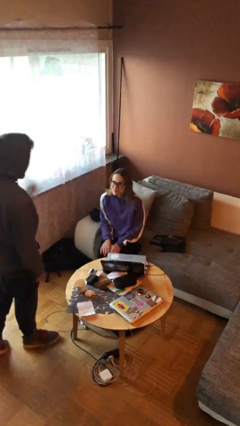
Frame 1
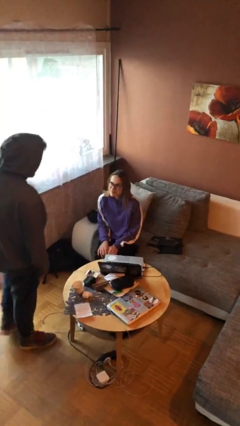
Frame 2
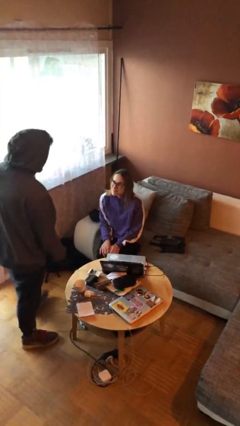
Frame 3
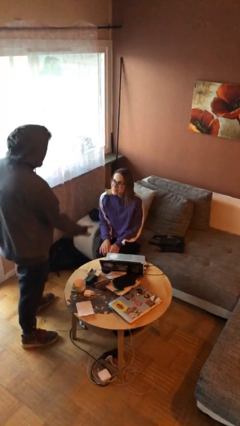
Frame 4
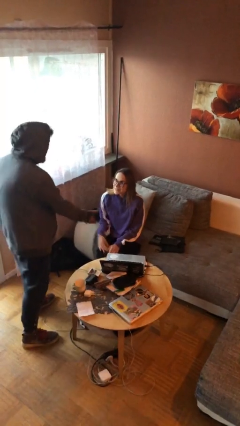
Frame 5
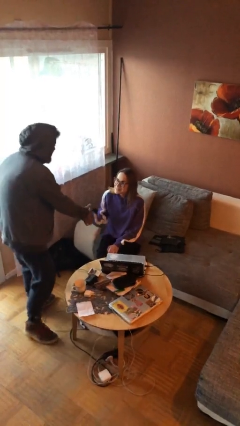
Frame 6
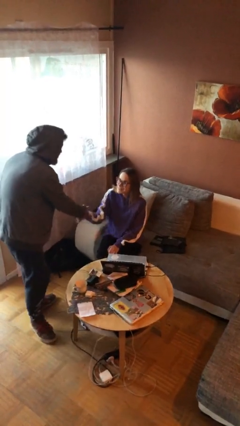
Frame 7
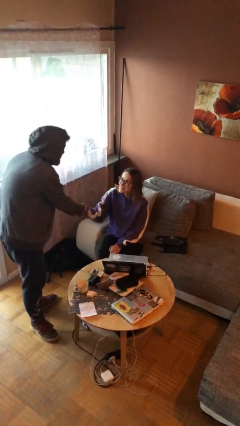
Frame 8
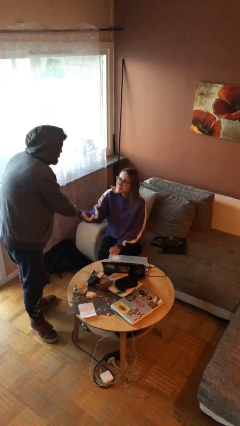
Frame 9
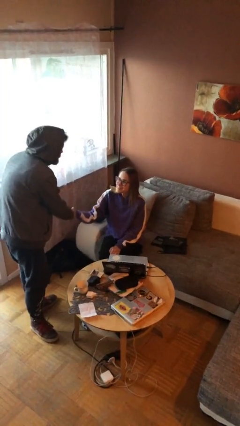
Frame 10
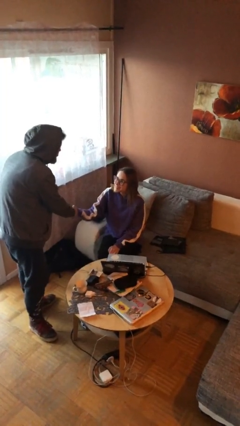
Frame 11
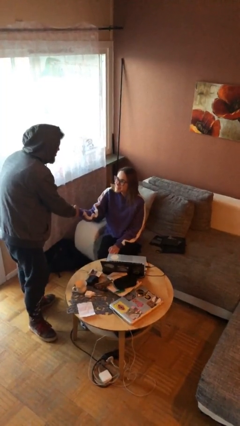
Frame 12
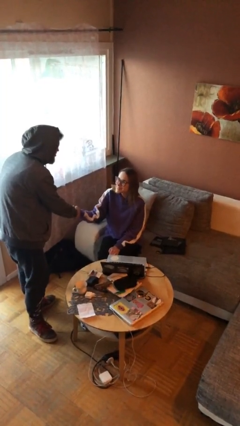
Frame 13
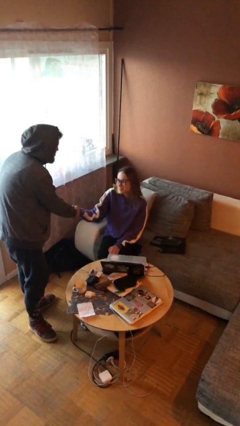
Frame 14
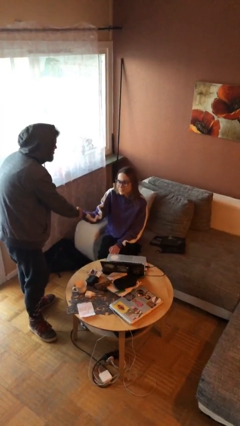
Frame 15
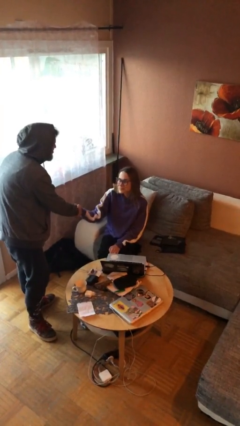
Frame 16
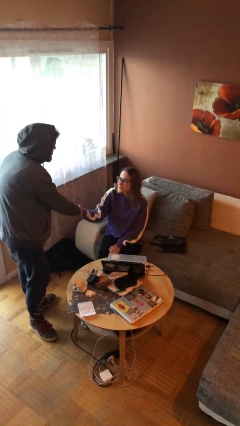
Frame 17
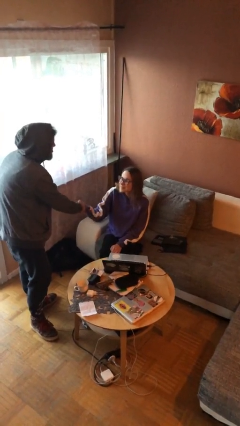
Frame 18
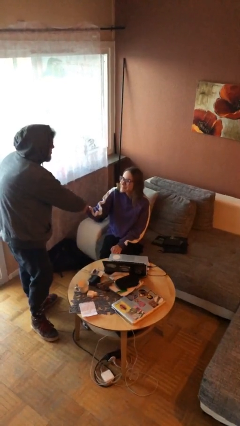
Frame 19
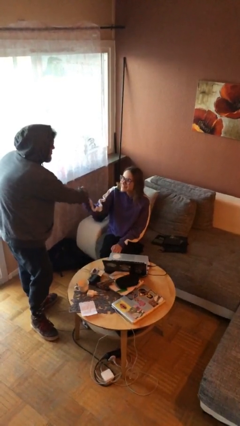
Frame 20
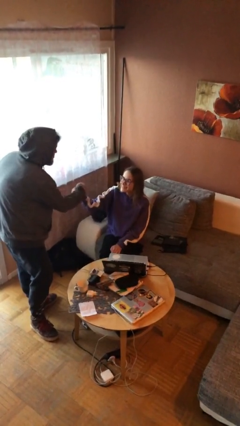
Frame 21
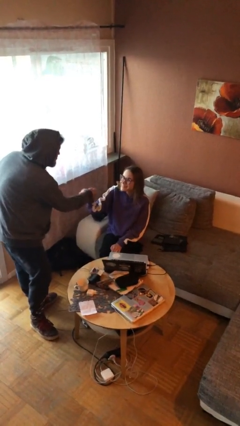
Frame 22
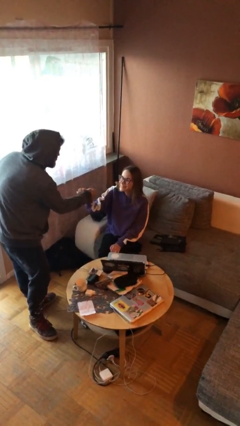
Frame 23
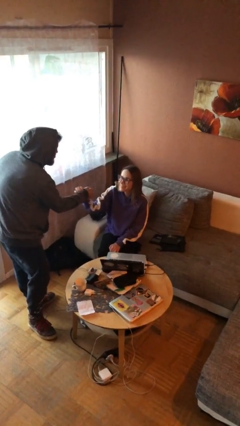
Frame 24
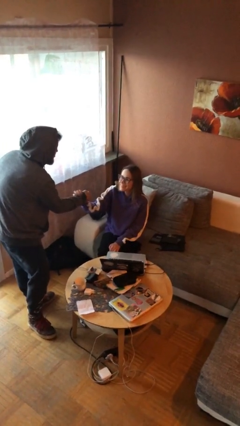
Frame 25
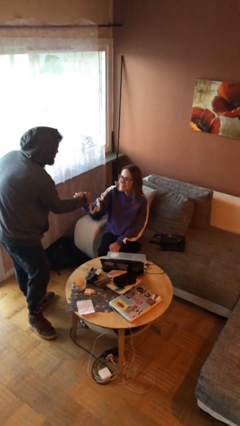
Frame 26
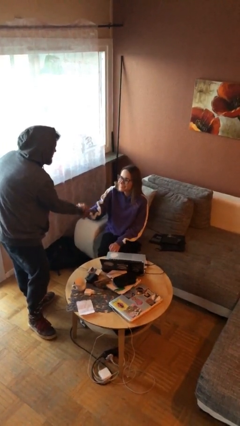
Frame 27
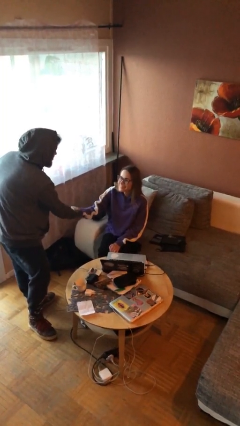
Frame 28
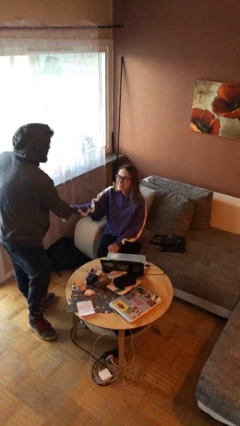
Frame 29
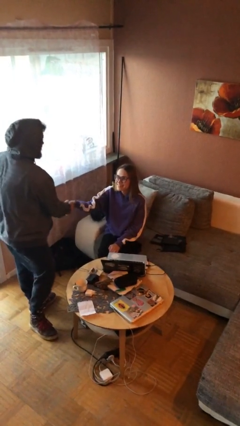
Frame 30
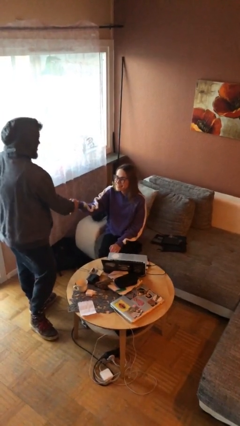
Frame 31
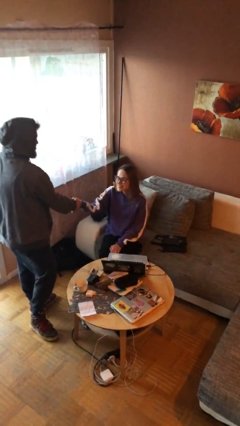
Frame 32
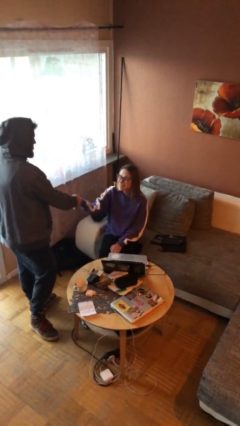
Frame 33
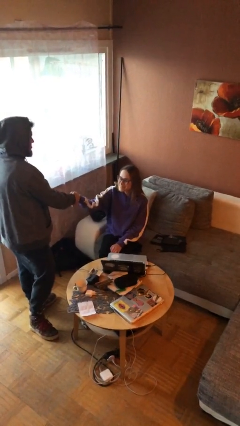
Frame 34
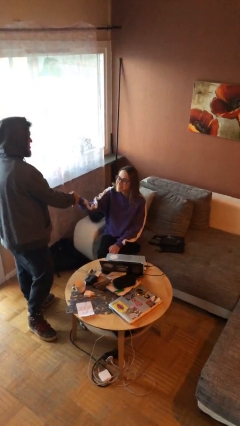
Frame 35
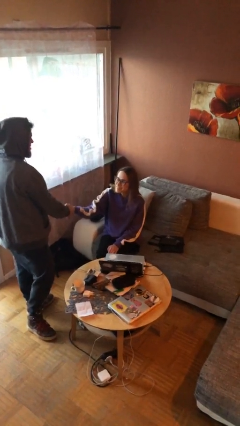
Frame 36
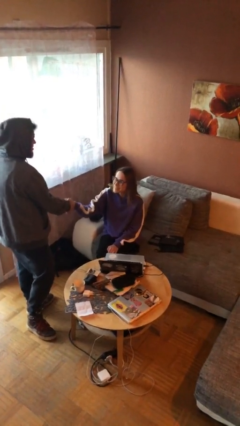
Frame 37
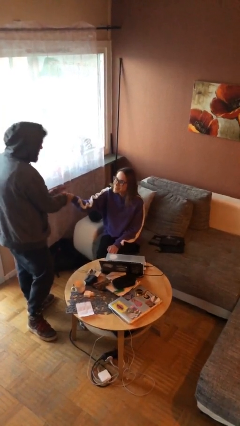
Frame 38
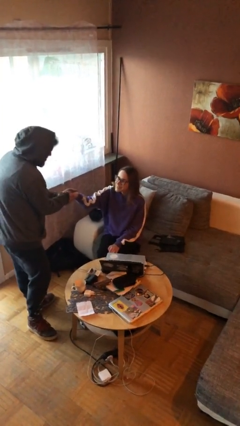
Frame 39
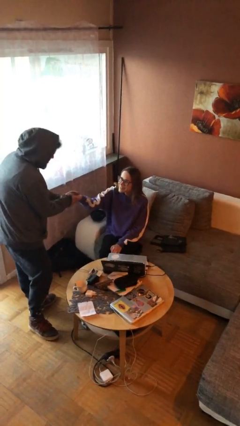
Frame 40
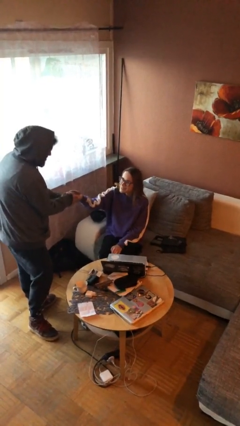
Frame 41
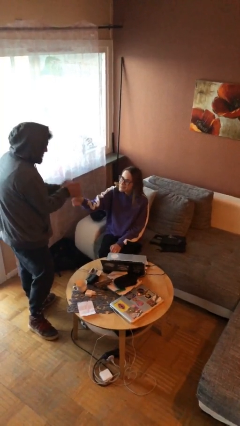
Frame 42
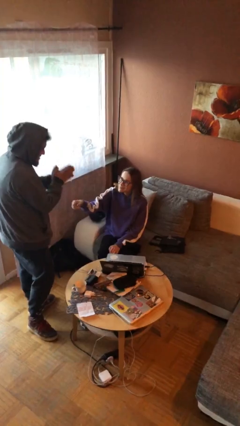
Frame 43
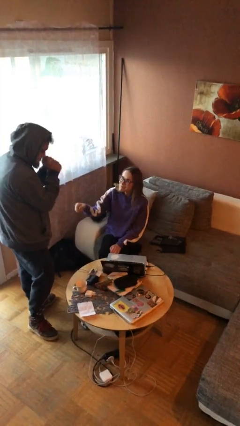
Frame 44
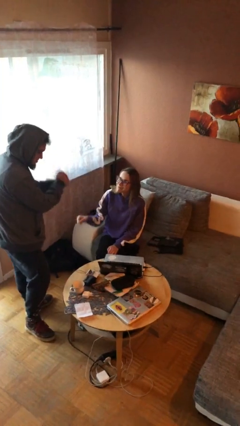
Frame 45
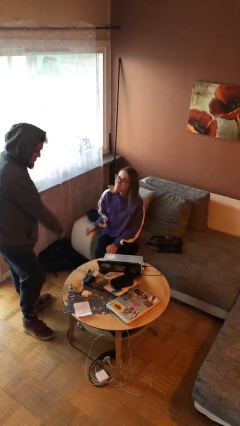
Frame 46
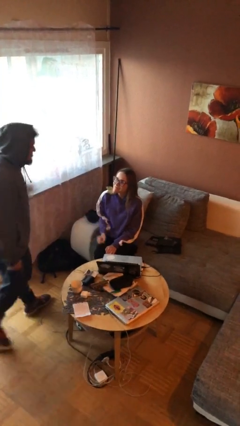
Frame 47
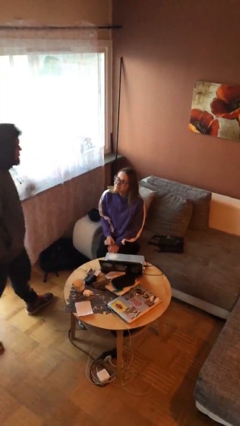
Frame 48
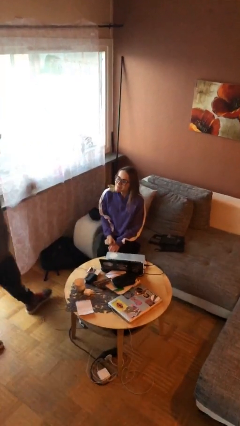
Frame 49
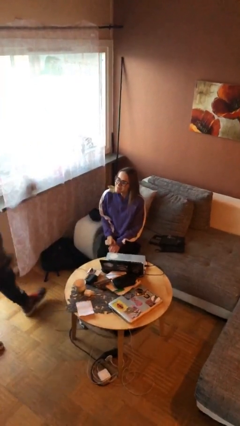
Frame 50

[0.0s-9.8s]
person shakes hand

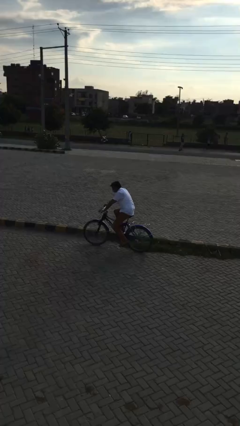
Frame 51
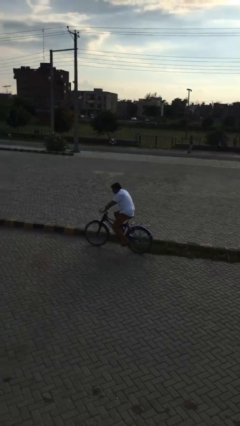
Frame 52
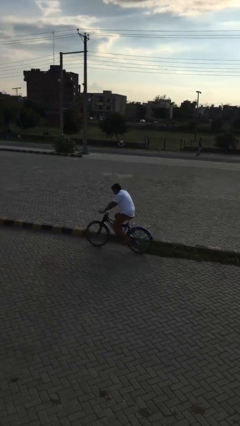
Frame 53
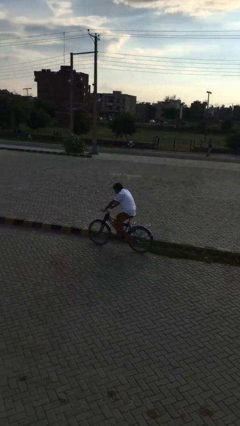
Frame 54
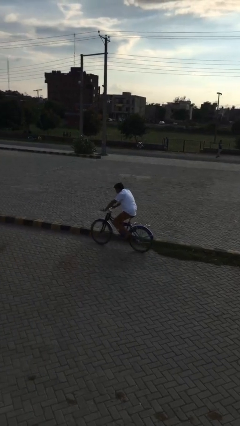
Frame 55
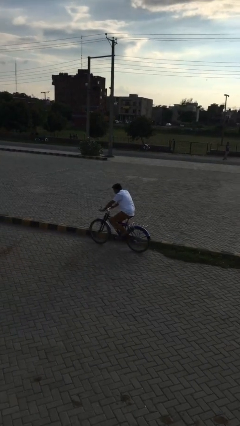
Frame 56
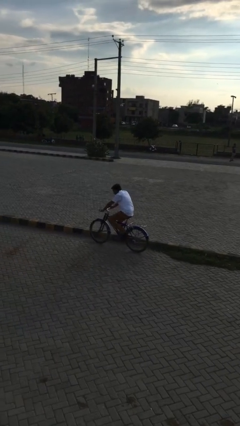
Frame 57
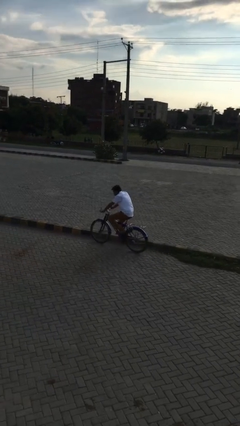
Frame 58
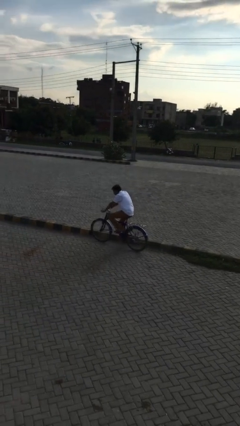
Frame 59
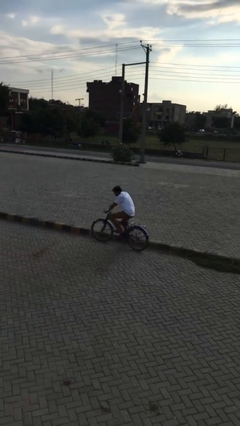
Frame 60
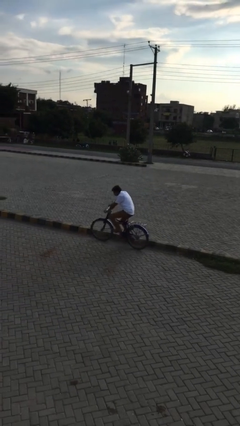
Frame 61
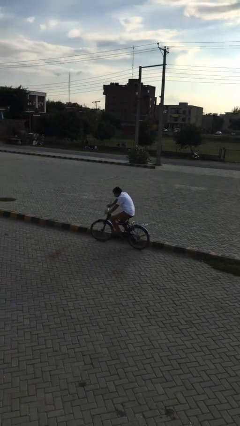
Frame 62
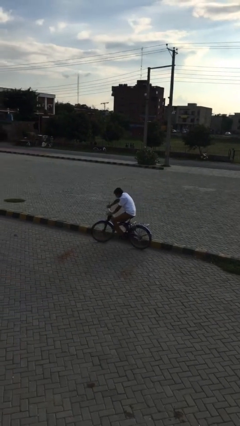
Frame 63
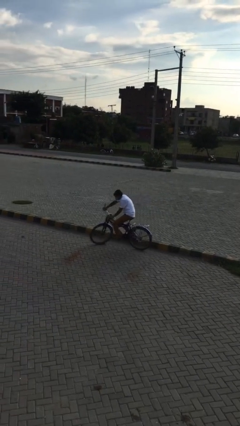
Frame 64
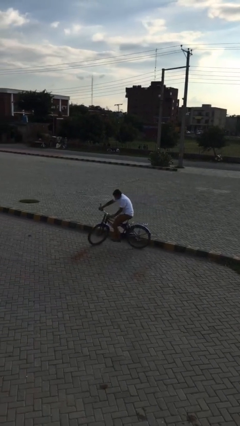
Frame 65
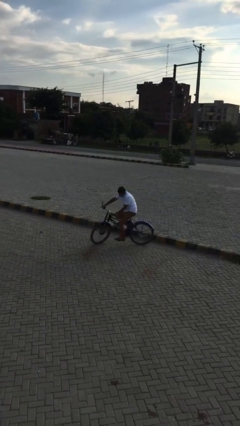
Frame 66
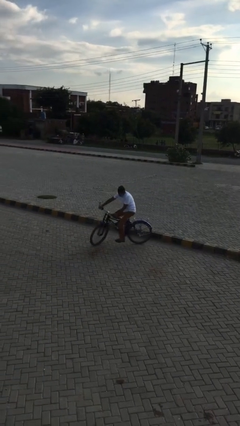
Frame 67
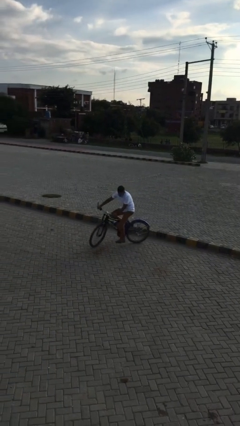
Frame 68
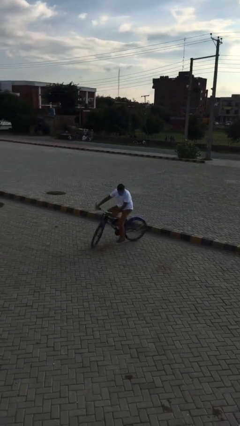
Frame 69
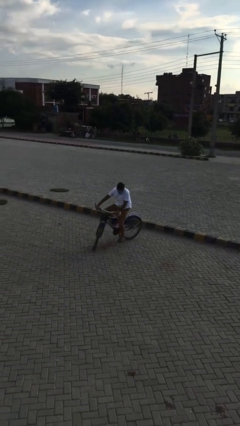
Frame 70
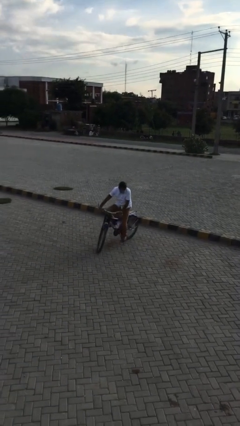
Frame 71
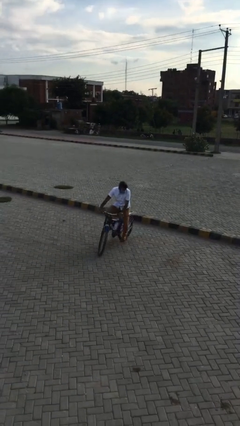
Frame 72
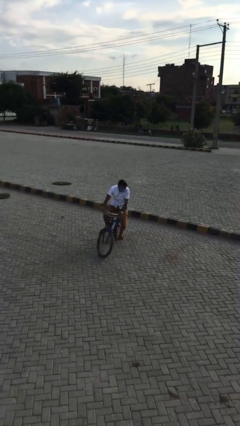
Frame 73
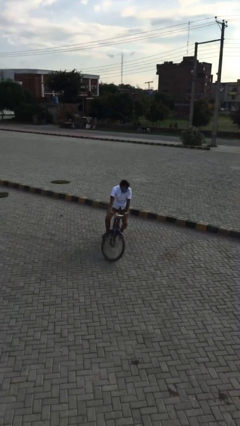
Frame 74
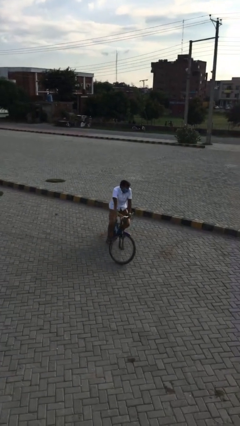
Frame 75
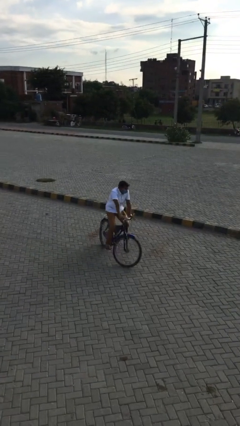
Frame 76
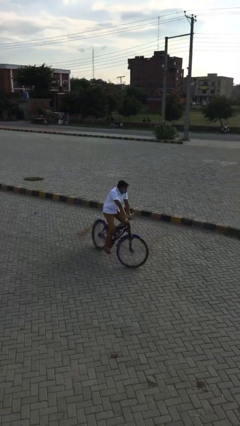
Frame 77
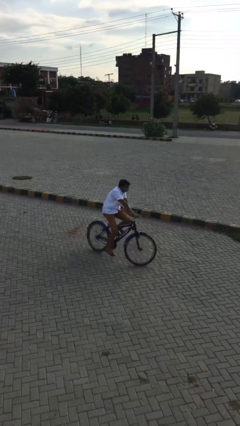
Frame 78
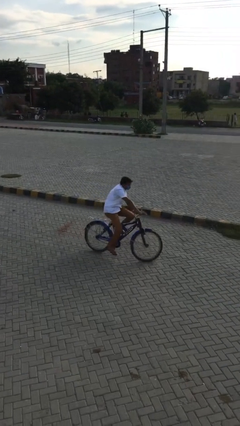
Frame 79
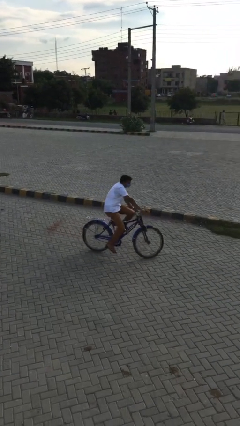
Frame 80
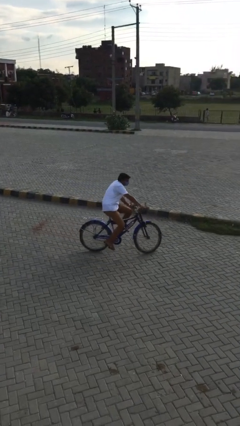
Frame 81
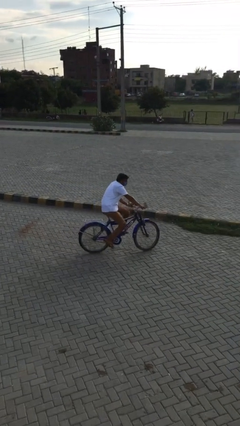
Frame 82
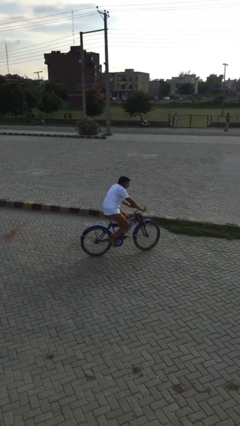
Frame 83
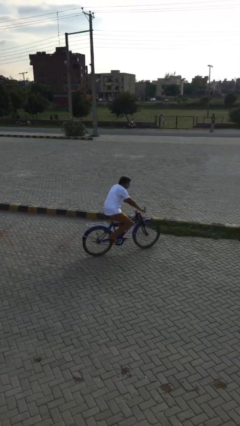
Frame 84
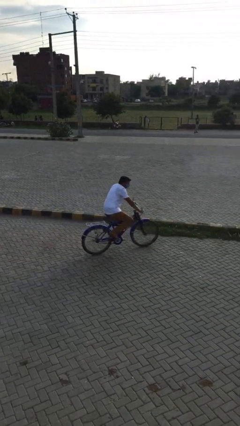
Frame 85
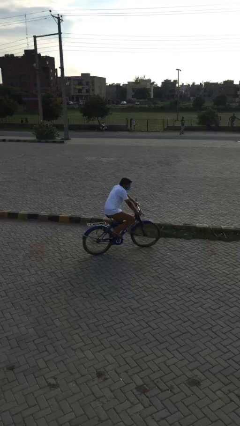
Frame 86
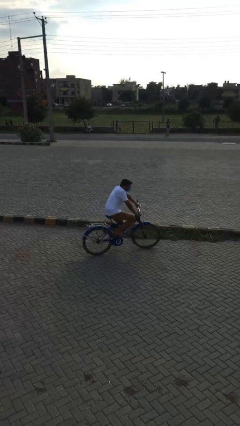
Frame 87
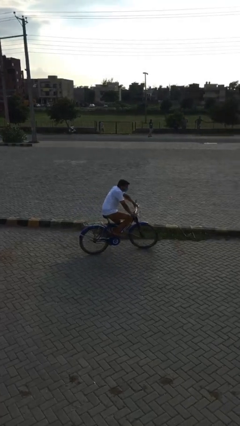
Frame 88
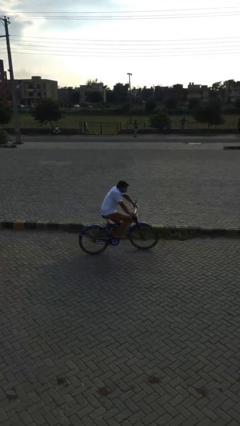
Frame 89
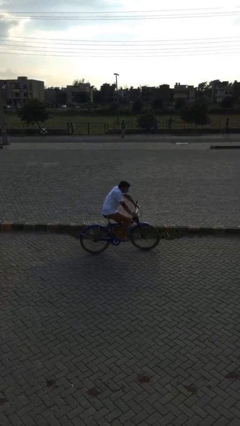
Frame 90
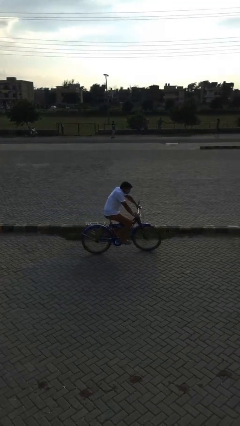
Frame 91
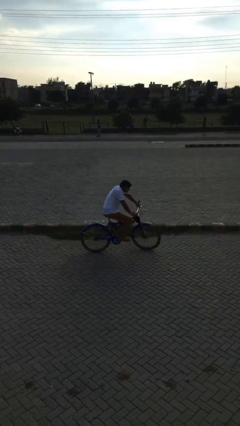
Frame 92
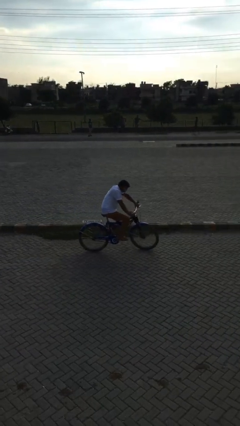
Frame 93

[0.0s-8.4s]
person rides bicycle

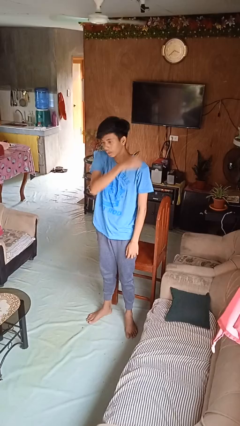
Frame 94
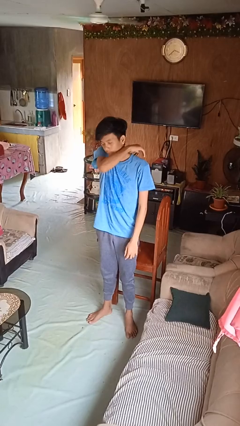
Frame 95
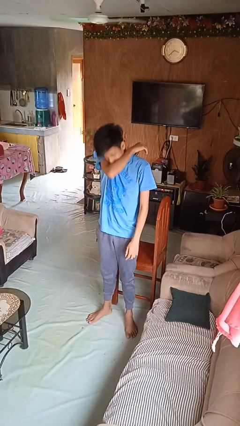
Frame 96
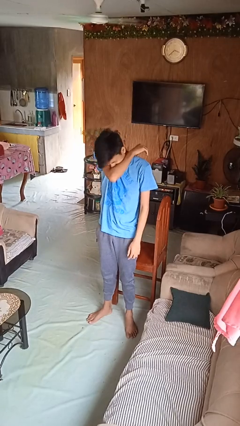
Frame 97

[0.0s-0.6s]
person sneezes into arm
